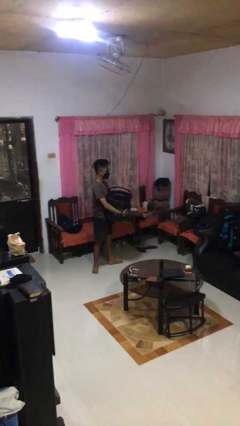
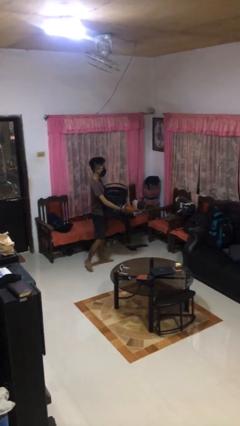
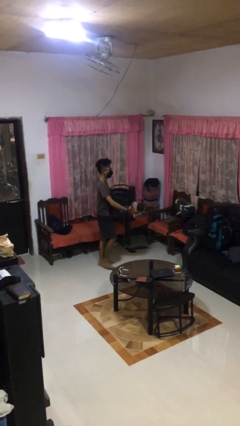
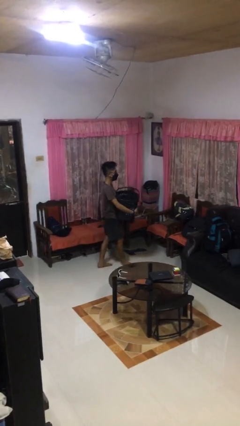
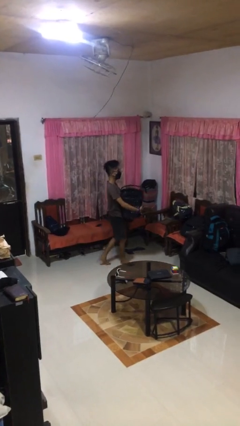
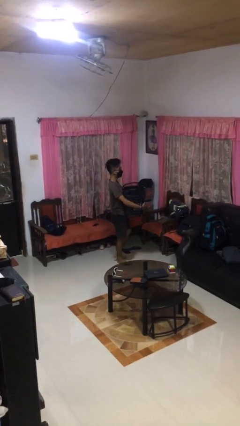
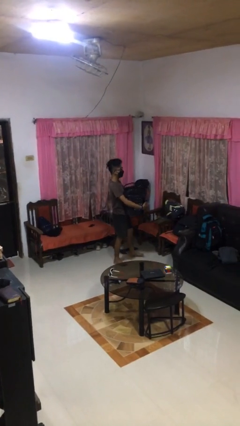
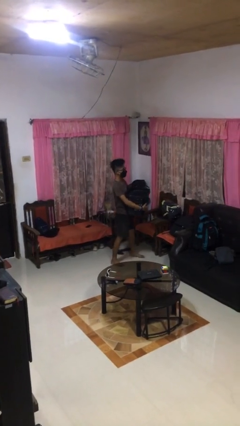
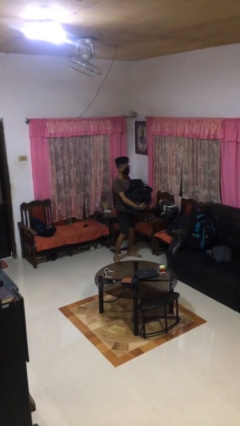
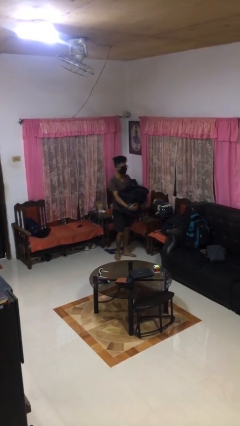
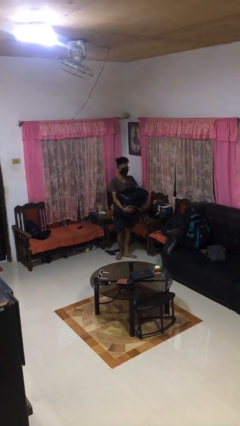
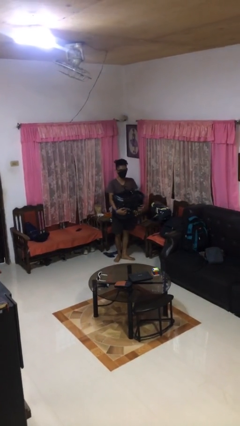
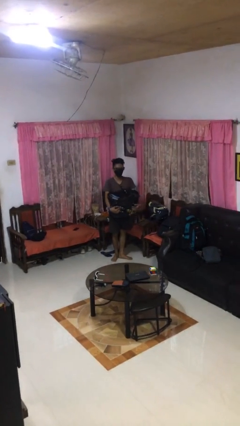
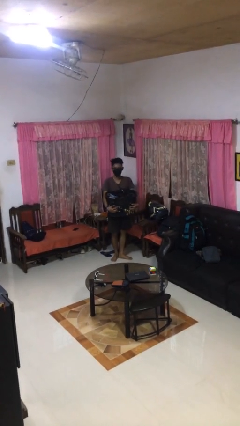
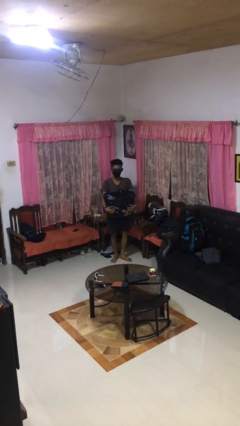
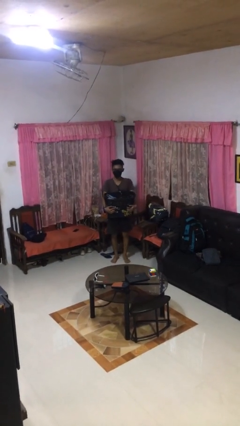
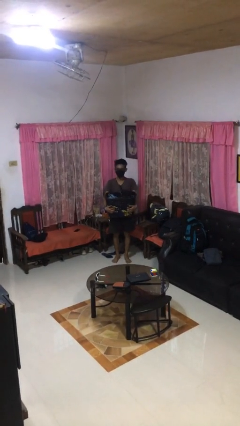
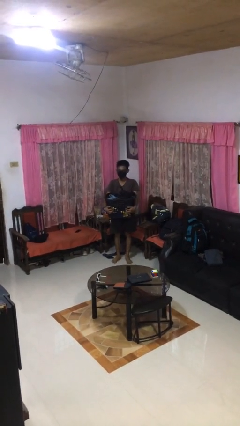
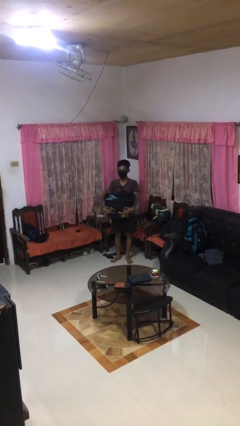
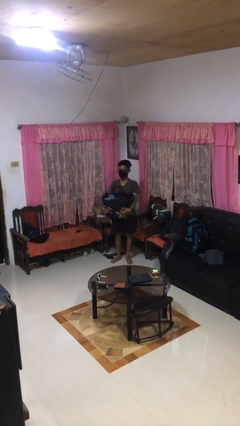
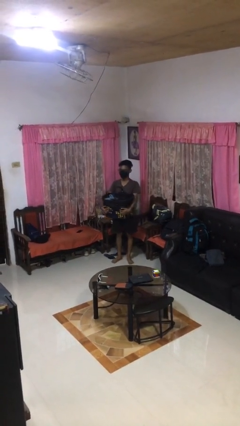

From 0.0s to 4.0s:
person carries laundry basket

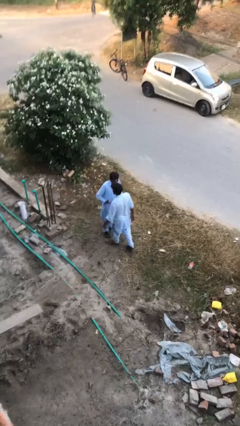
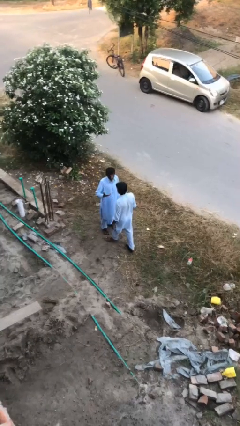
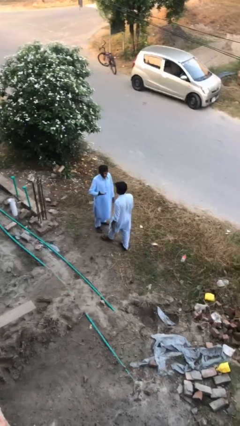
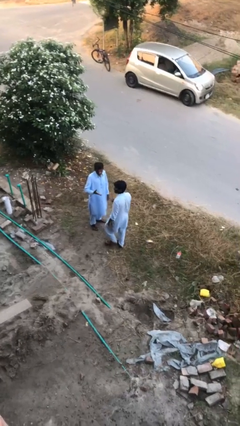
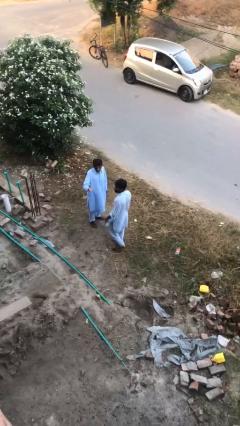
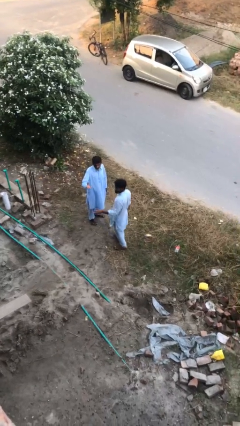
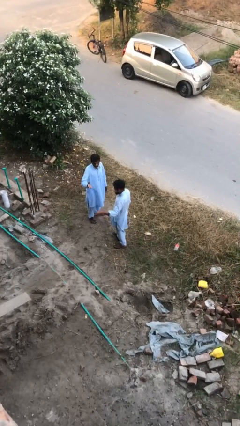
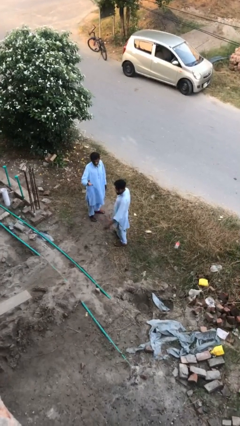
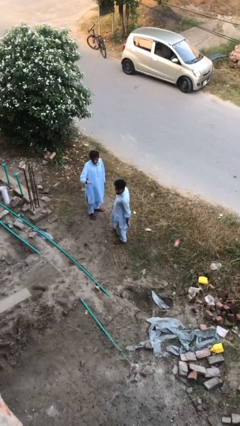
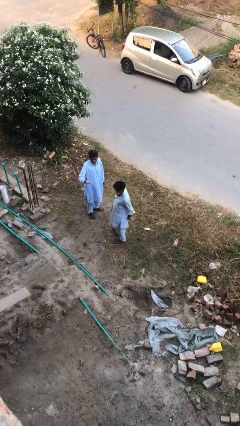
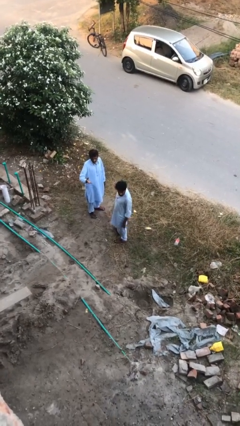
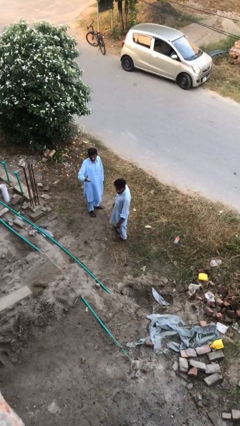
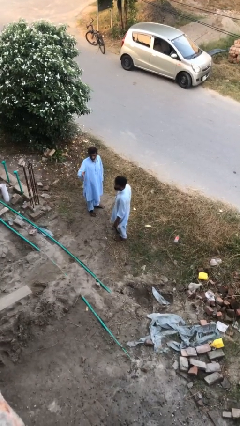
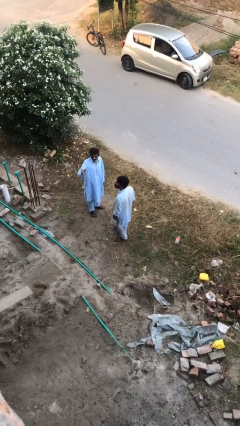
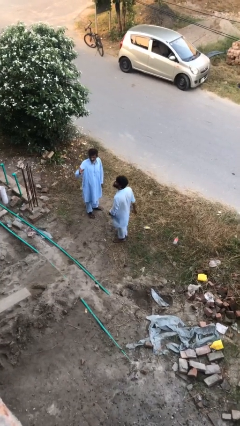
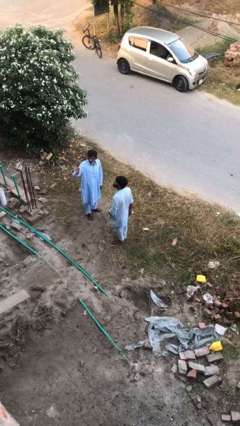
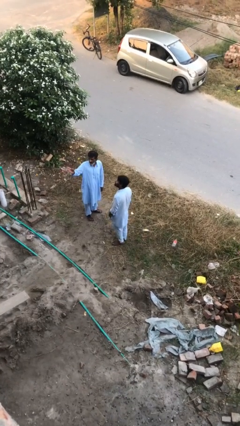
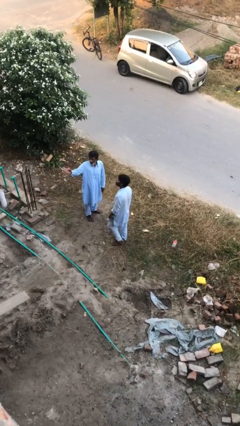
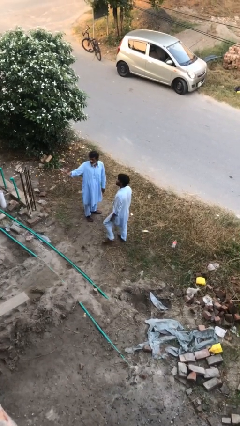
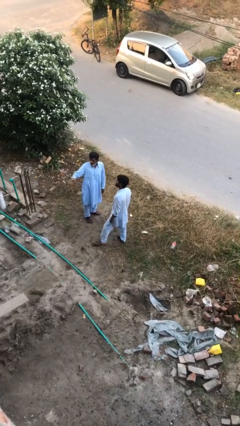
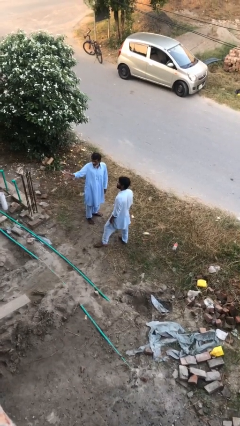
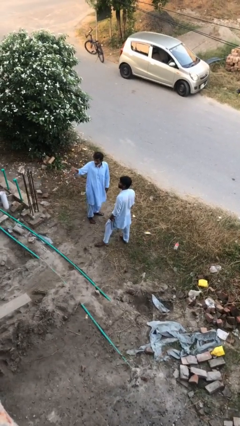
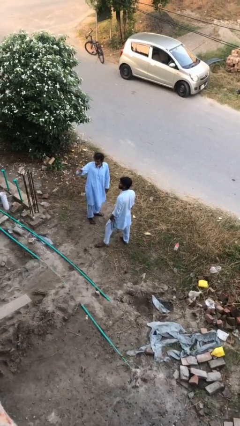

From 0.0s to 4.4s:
person talks to person

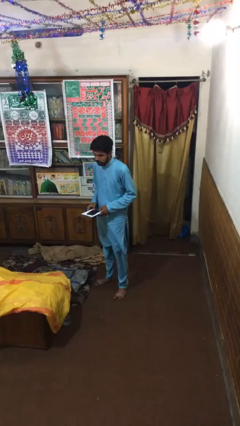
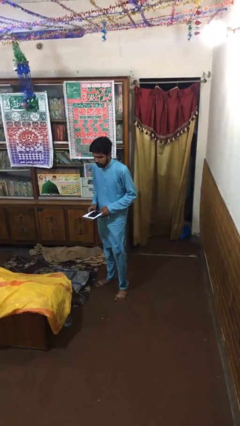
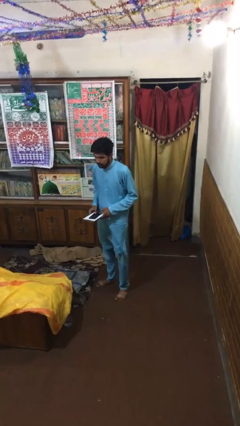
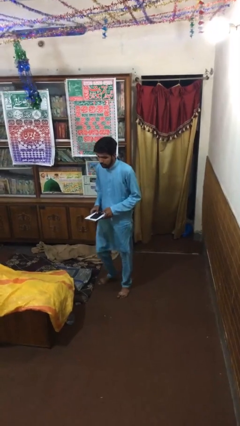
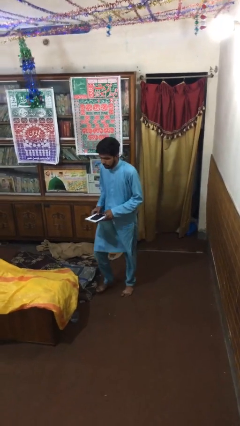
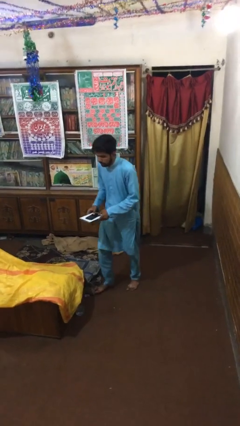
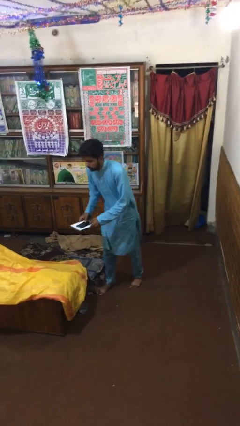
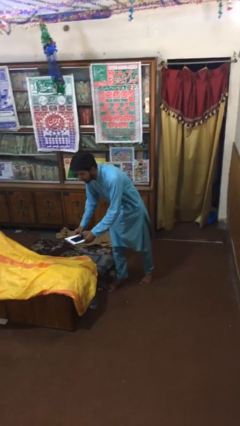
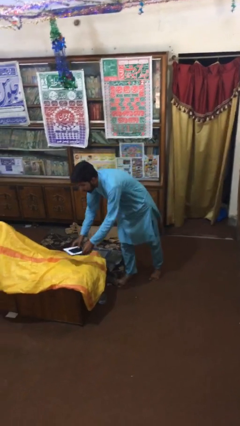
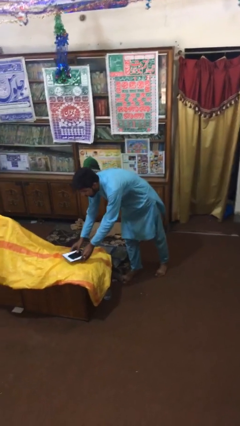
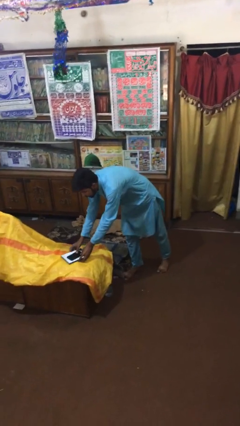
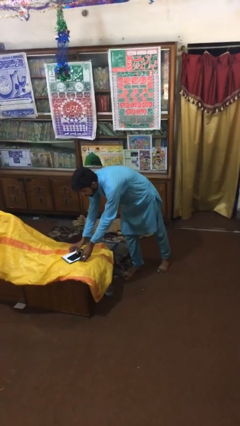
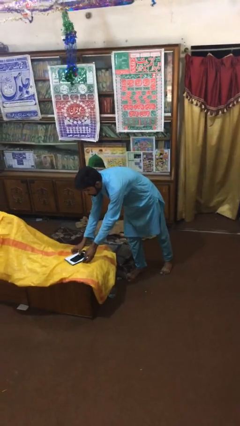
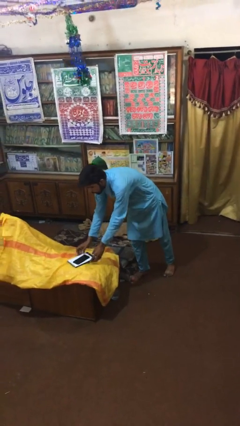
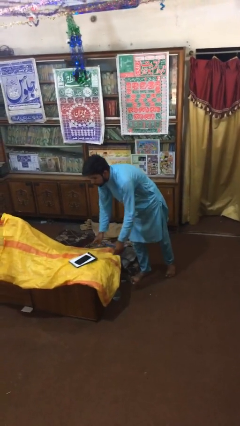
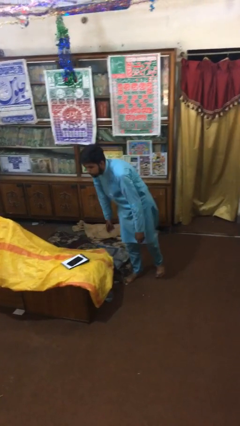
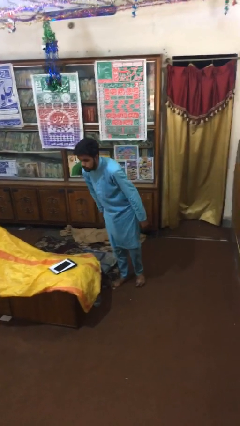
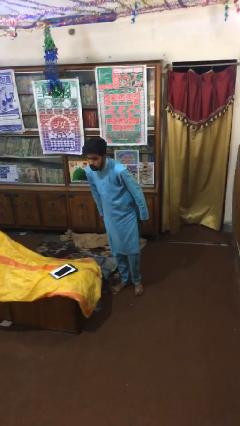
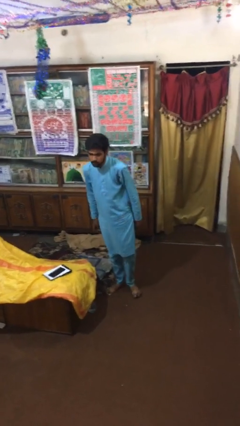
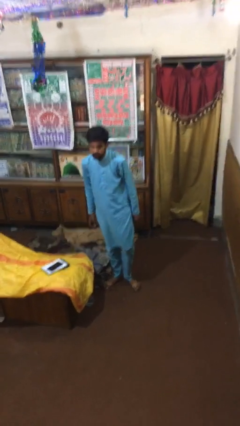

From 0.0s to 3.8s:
person puts down object on table

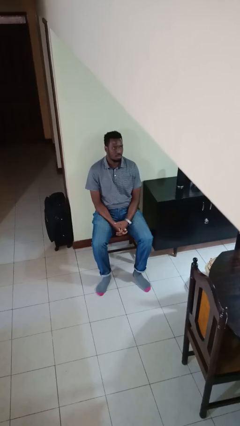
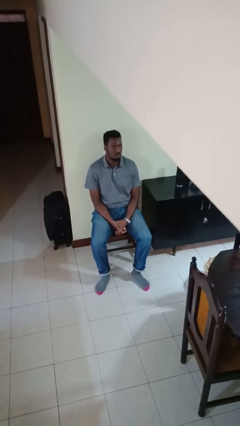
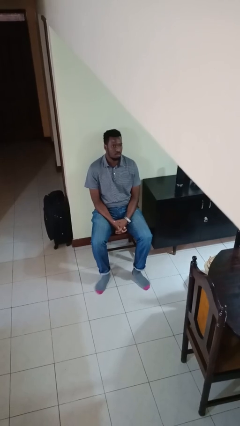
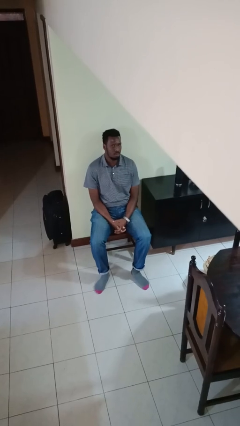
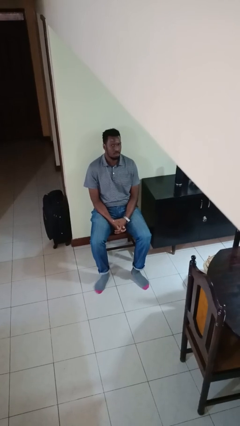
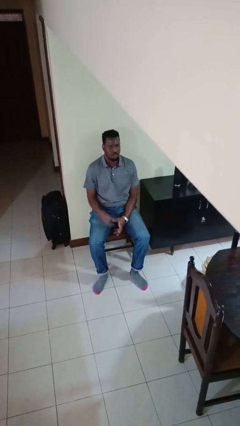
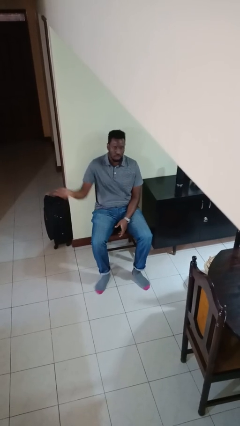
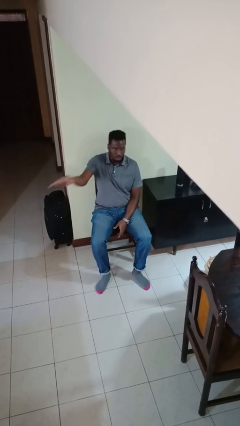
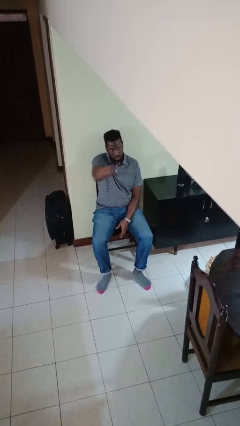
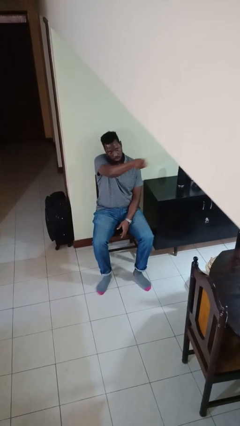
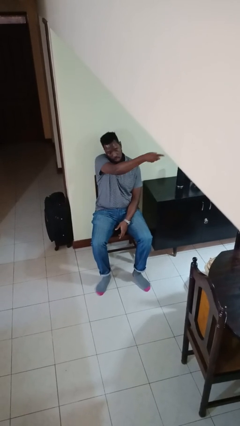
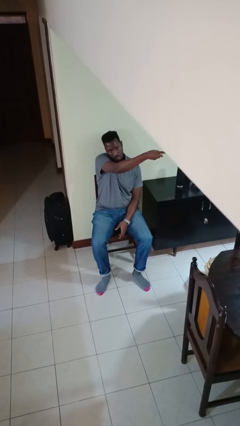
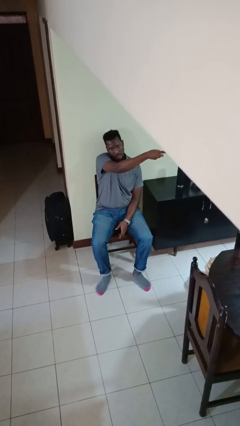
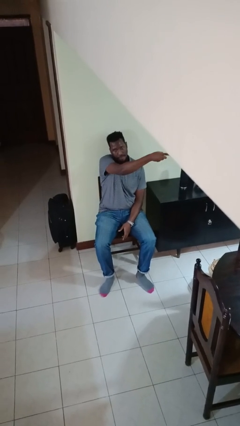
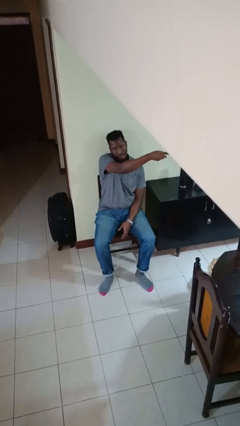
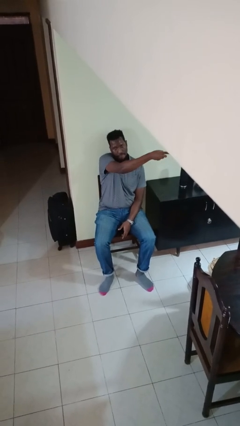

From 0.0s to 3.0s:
person gestures swipe left

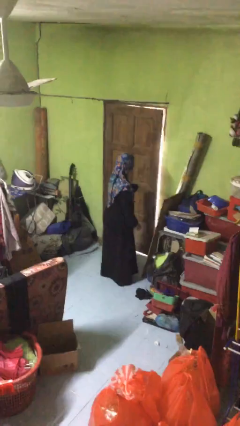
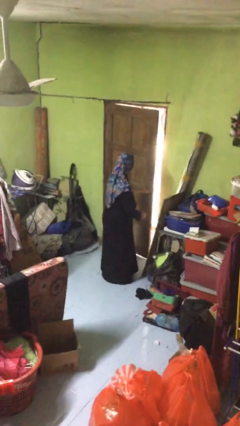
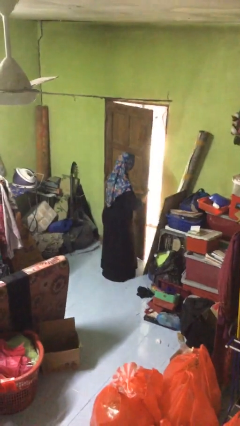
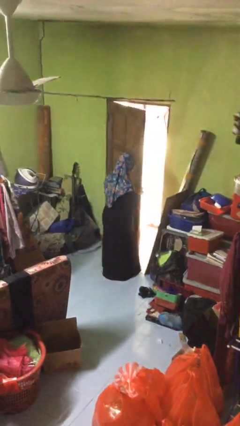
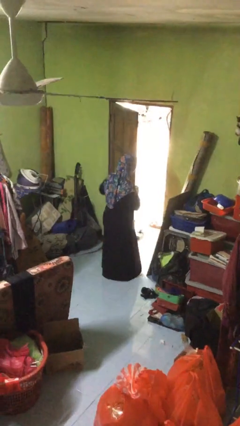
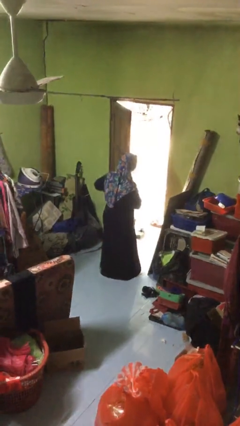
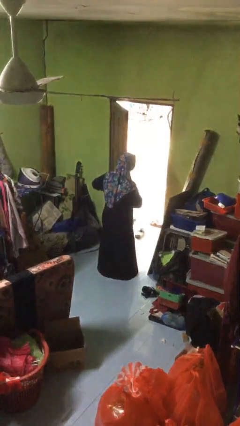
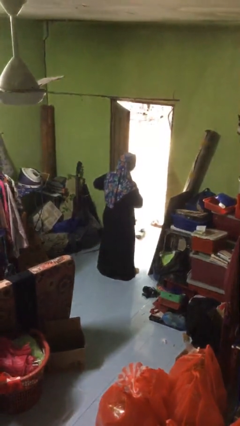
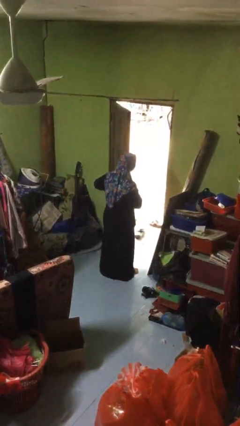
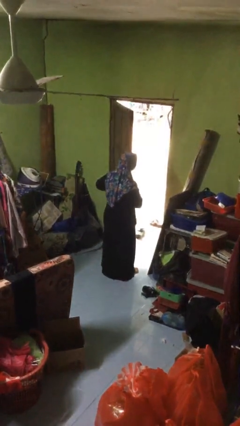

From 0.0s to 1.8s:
person opens facility door

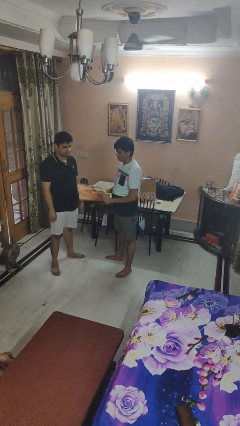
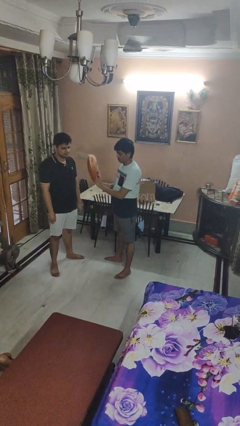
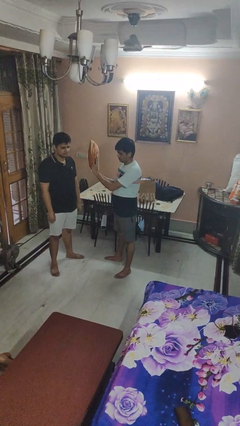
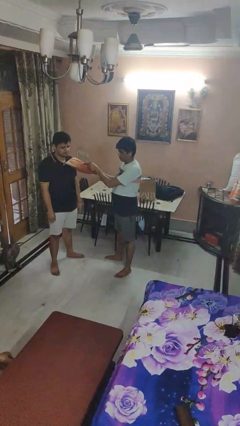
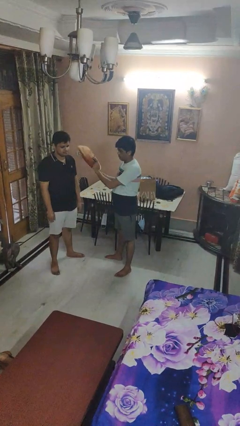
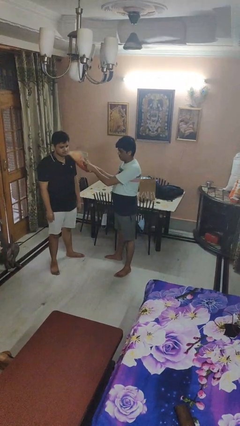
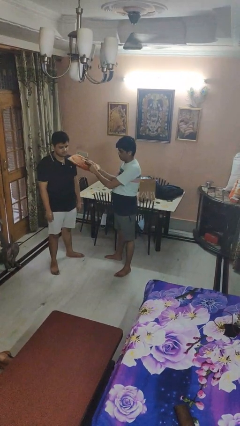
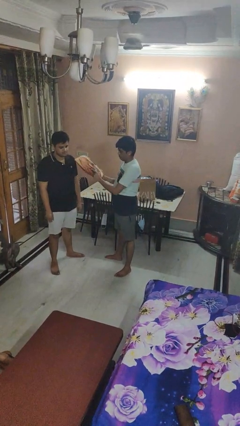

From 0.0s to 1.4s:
person hits person with pillow
